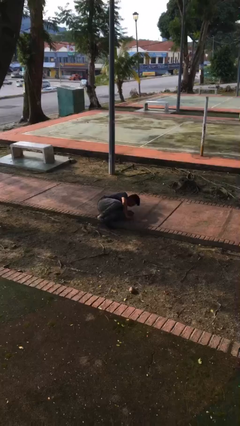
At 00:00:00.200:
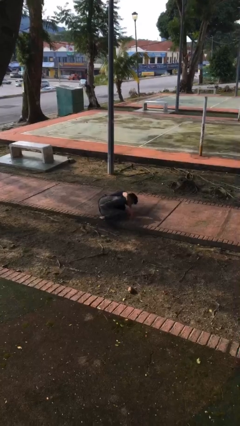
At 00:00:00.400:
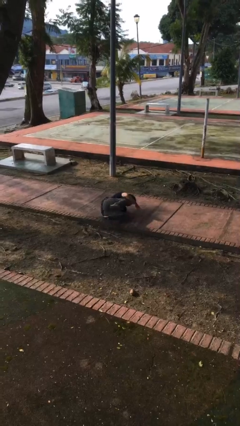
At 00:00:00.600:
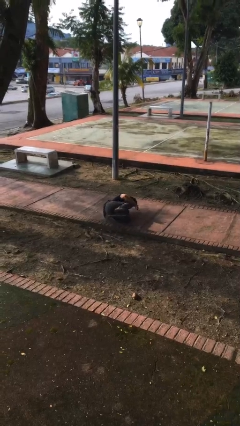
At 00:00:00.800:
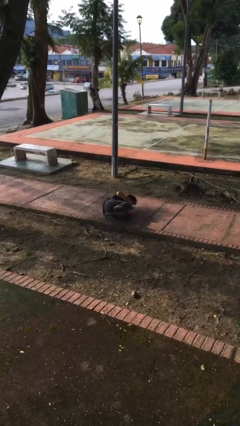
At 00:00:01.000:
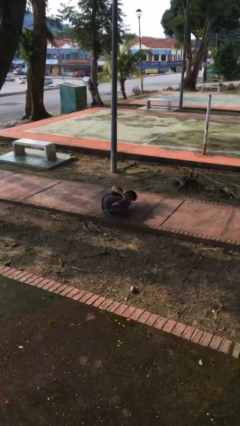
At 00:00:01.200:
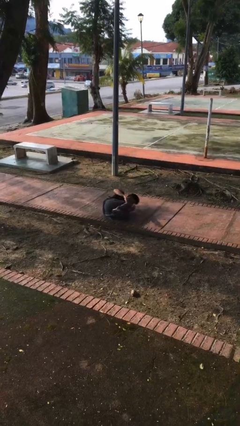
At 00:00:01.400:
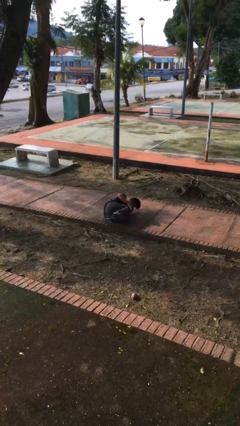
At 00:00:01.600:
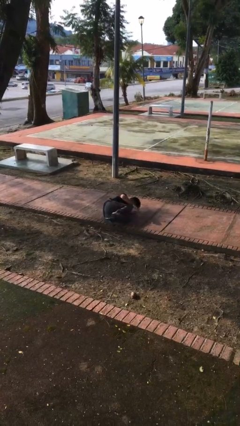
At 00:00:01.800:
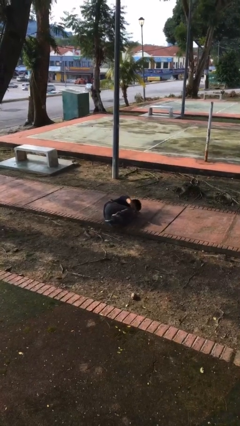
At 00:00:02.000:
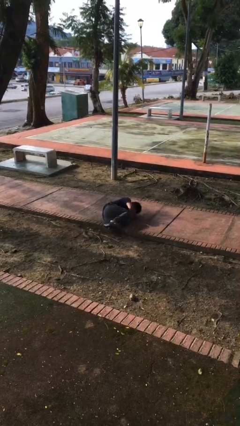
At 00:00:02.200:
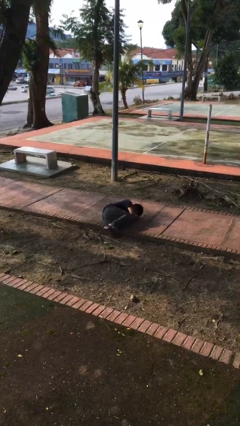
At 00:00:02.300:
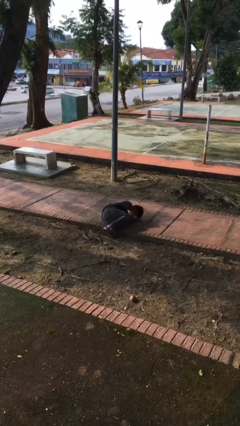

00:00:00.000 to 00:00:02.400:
person lies down on floor

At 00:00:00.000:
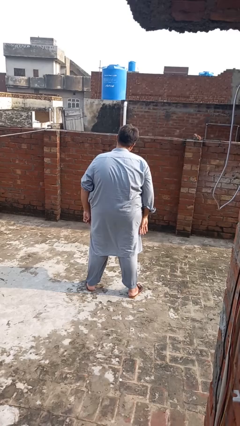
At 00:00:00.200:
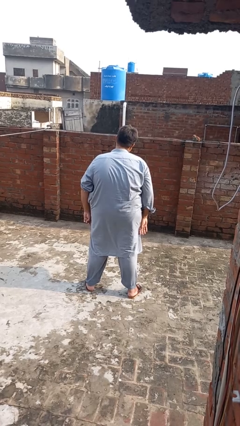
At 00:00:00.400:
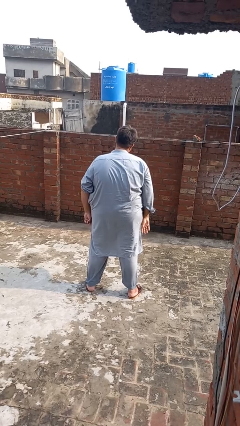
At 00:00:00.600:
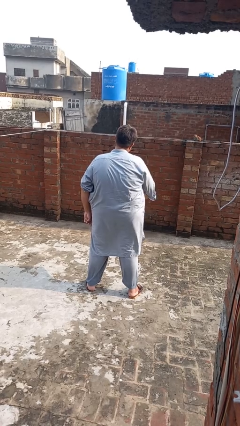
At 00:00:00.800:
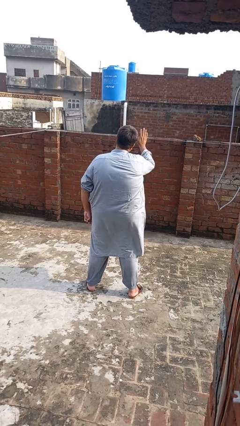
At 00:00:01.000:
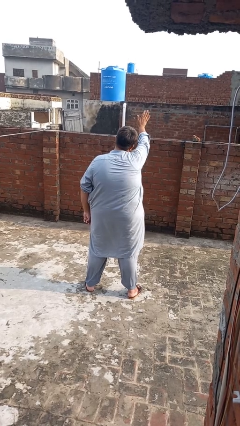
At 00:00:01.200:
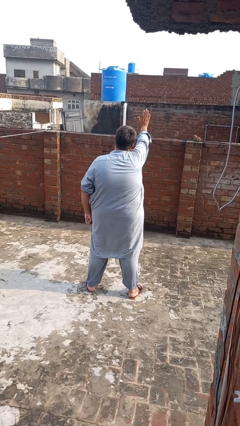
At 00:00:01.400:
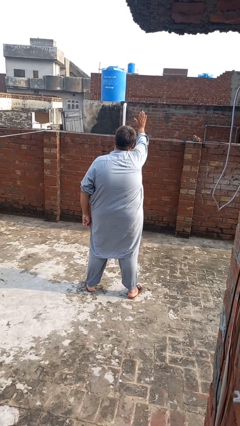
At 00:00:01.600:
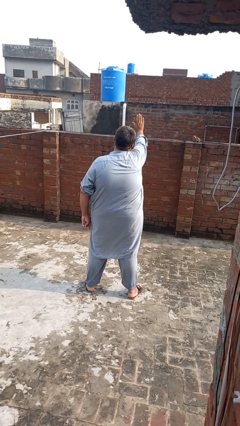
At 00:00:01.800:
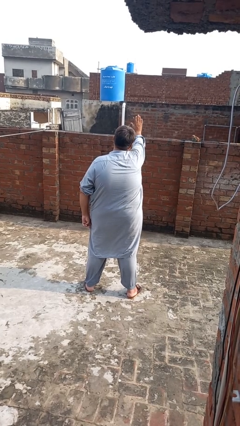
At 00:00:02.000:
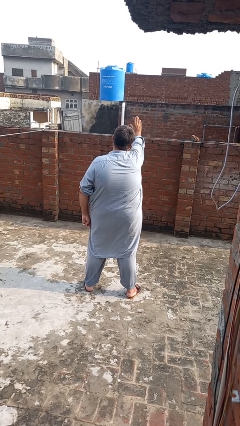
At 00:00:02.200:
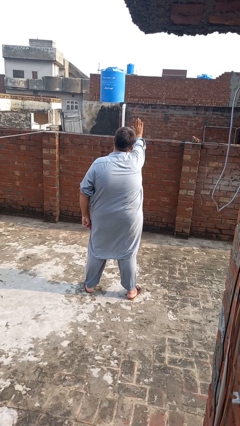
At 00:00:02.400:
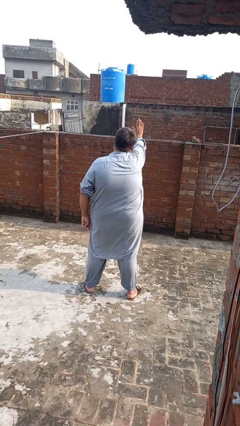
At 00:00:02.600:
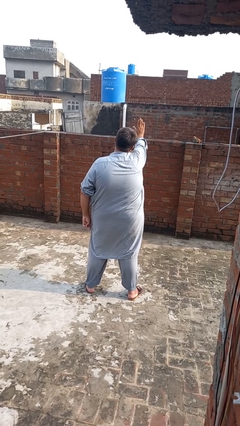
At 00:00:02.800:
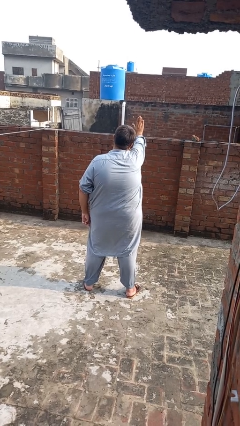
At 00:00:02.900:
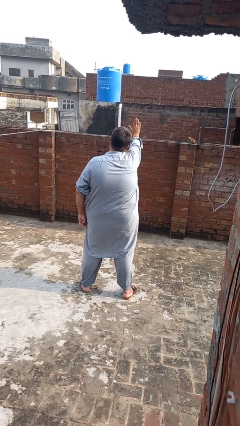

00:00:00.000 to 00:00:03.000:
person gestures stop

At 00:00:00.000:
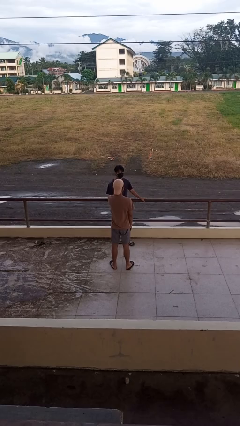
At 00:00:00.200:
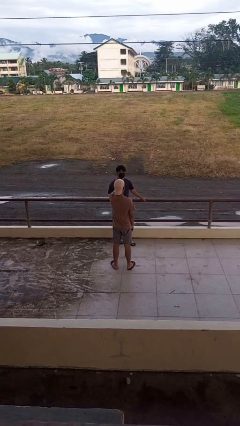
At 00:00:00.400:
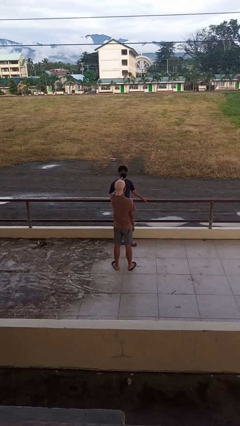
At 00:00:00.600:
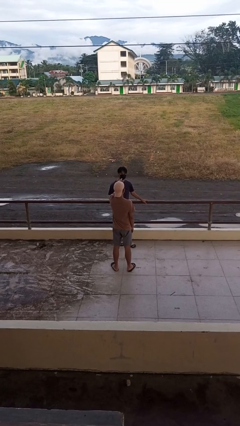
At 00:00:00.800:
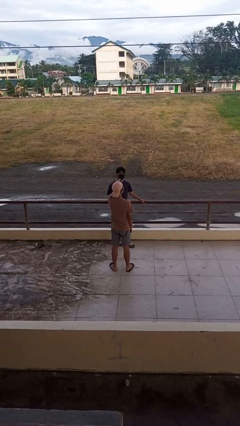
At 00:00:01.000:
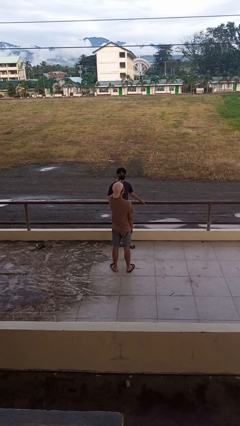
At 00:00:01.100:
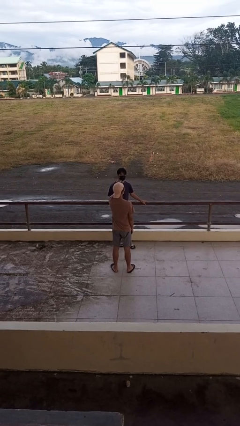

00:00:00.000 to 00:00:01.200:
person points at person

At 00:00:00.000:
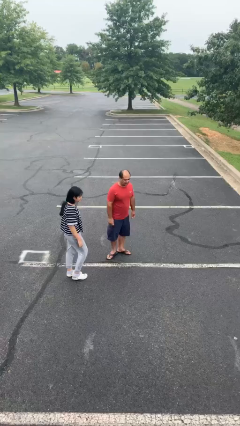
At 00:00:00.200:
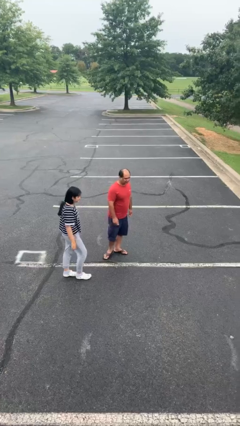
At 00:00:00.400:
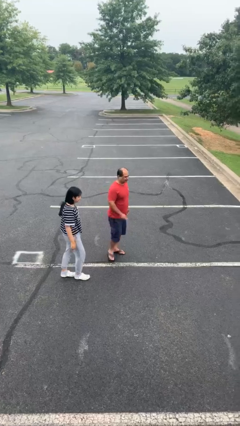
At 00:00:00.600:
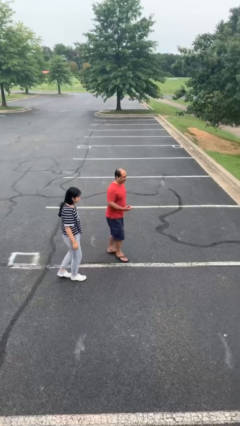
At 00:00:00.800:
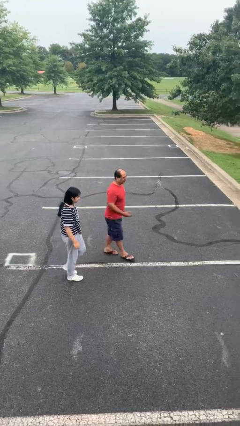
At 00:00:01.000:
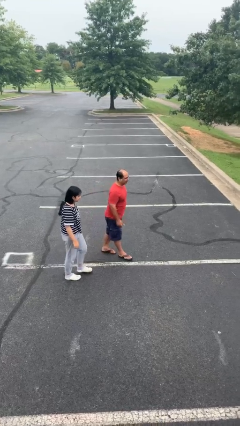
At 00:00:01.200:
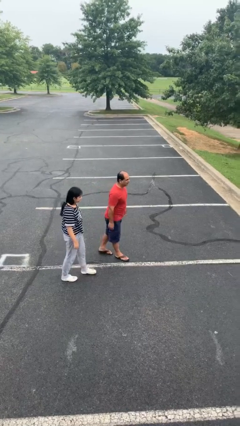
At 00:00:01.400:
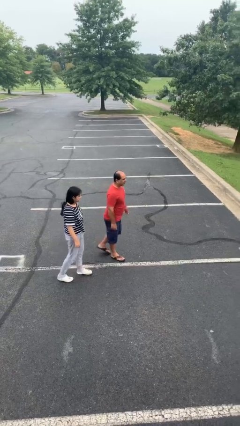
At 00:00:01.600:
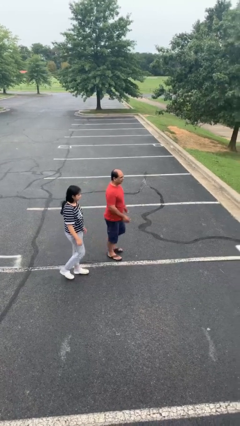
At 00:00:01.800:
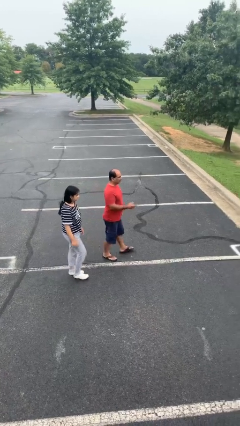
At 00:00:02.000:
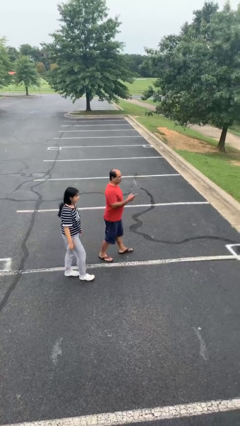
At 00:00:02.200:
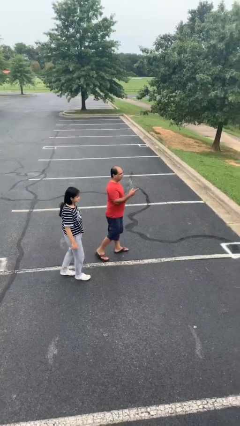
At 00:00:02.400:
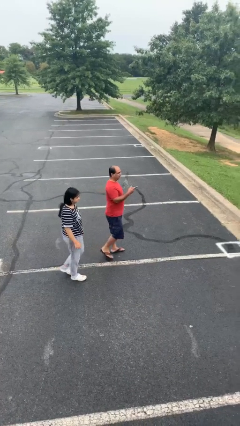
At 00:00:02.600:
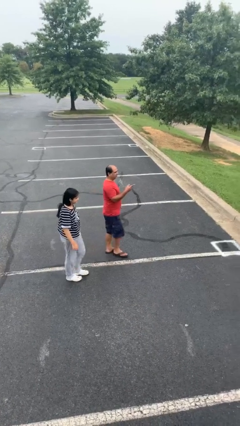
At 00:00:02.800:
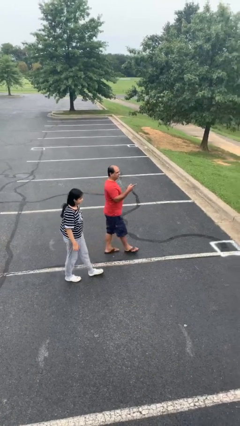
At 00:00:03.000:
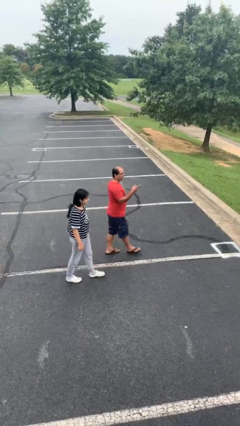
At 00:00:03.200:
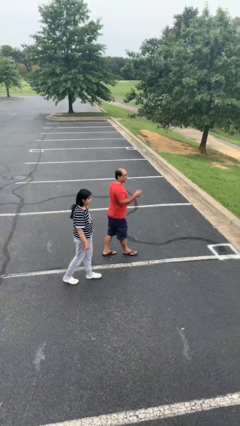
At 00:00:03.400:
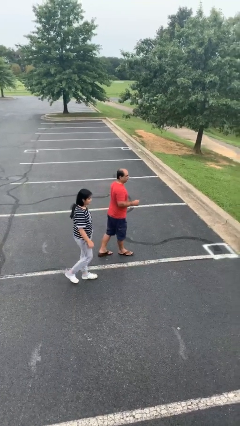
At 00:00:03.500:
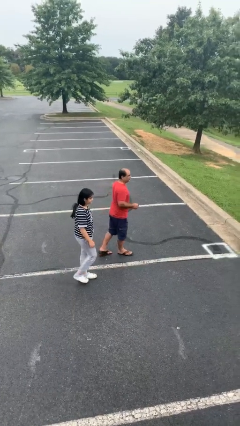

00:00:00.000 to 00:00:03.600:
person talks to person

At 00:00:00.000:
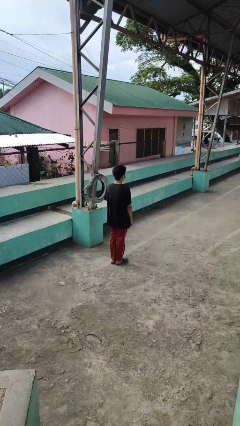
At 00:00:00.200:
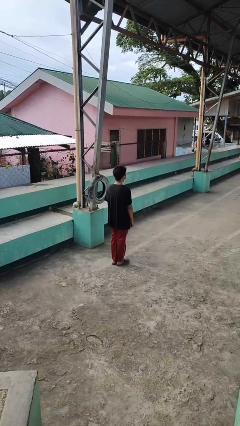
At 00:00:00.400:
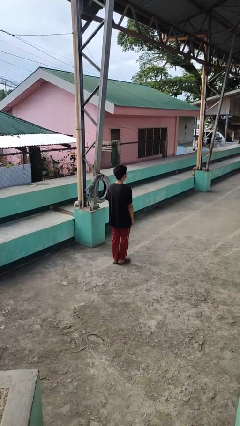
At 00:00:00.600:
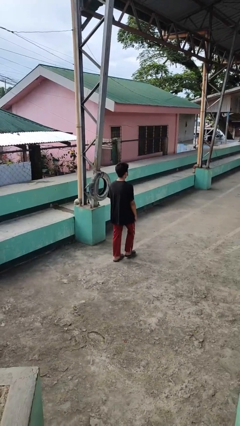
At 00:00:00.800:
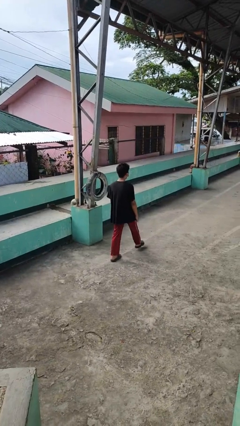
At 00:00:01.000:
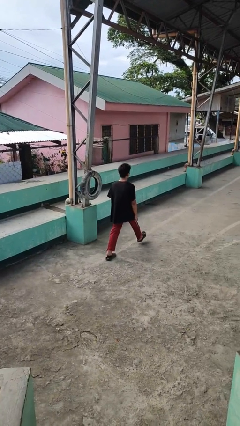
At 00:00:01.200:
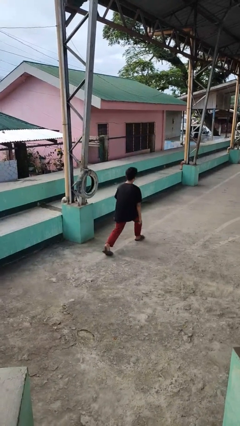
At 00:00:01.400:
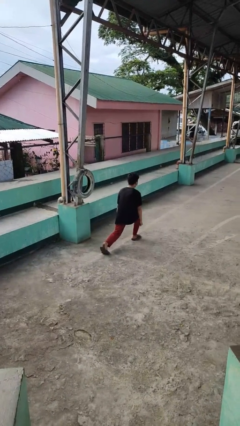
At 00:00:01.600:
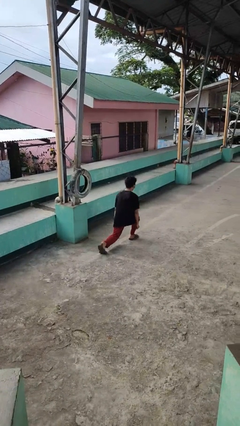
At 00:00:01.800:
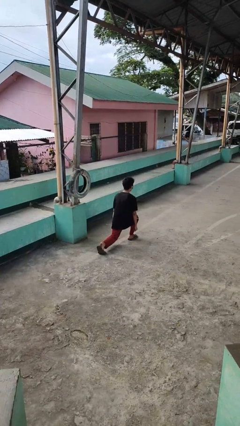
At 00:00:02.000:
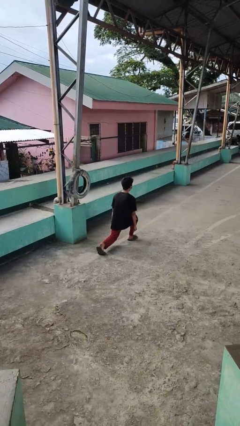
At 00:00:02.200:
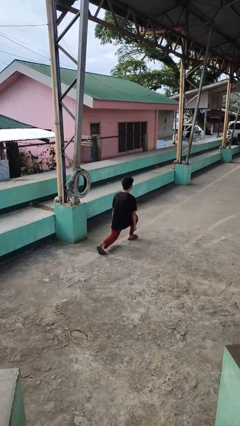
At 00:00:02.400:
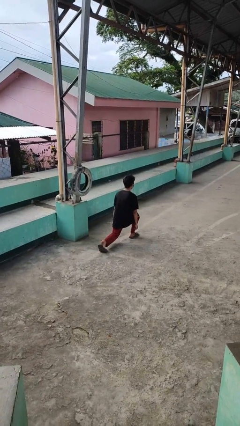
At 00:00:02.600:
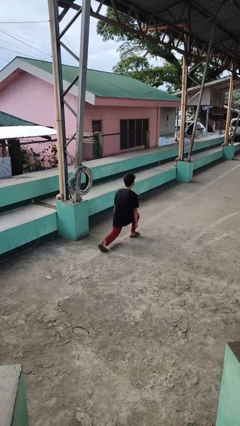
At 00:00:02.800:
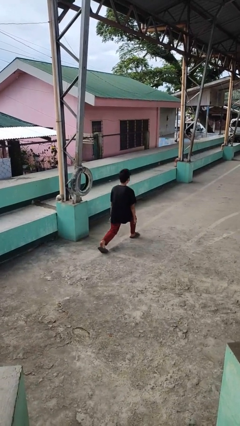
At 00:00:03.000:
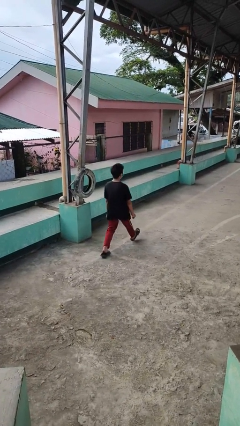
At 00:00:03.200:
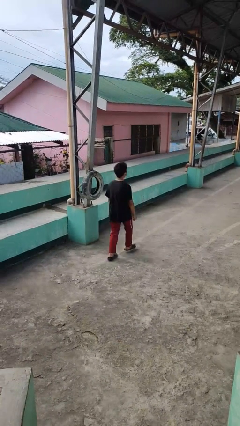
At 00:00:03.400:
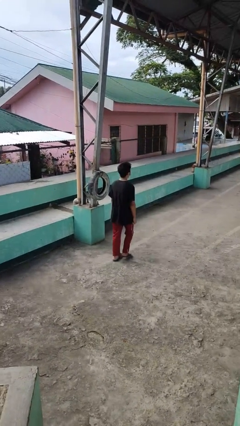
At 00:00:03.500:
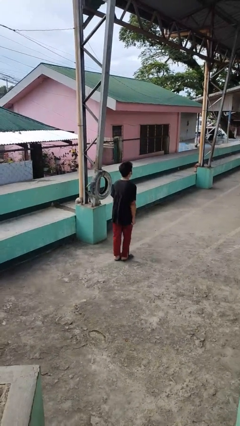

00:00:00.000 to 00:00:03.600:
person exercises with lunges

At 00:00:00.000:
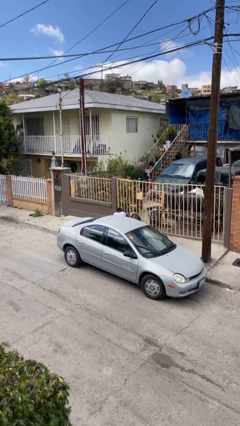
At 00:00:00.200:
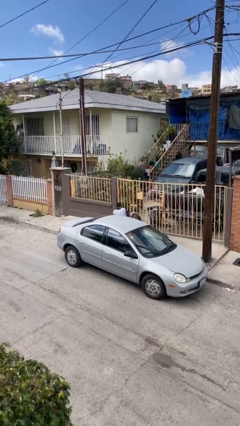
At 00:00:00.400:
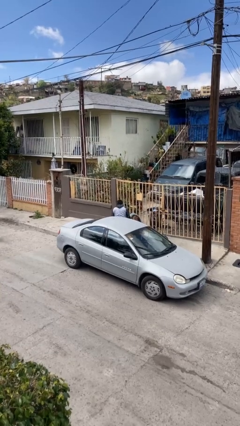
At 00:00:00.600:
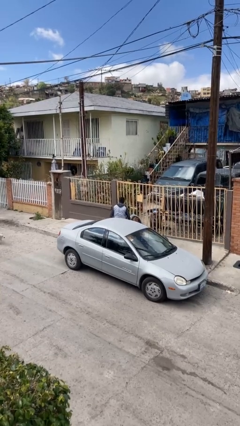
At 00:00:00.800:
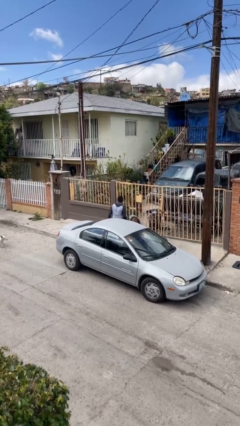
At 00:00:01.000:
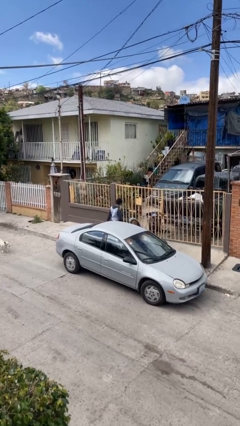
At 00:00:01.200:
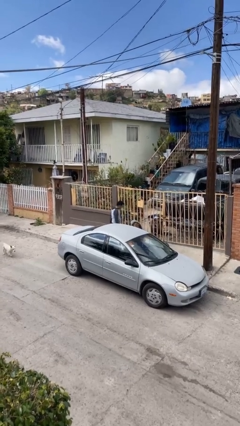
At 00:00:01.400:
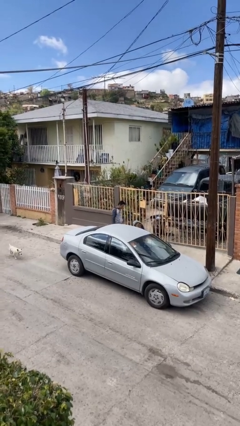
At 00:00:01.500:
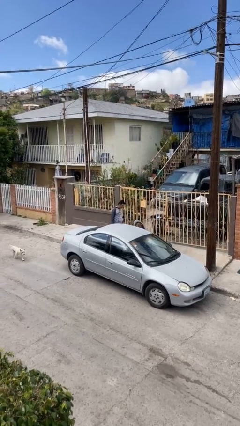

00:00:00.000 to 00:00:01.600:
person exits car

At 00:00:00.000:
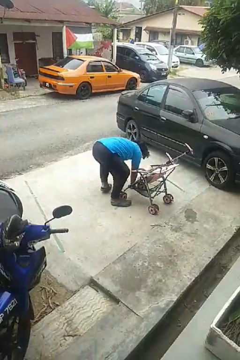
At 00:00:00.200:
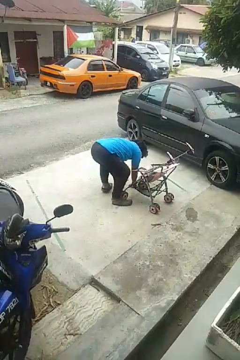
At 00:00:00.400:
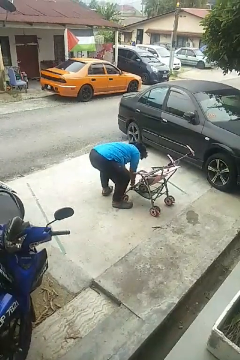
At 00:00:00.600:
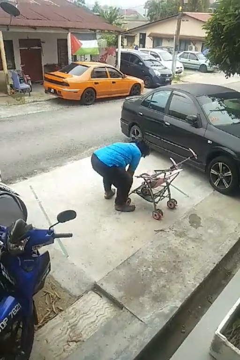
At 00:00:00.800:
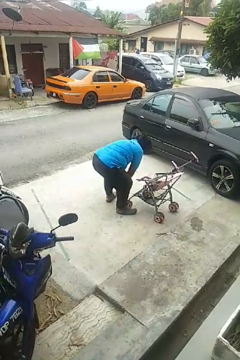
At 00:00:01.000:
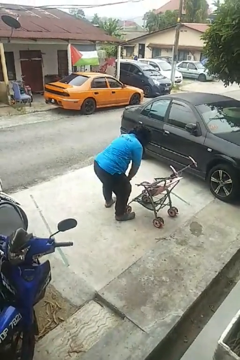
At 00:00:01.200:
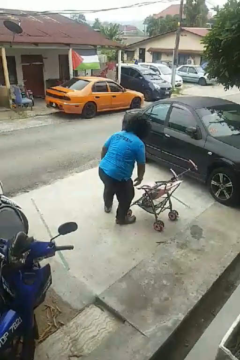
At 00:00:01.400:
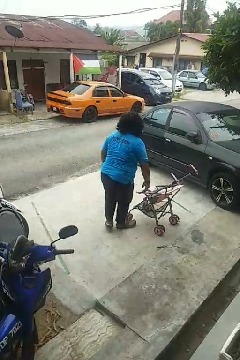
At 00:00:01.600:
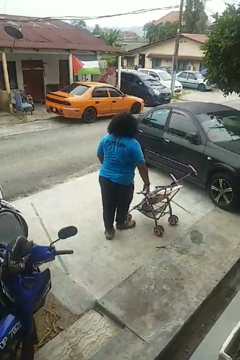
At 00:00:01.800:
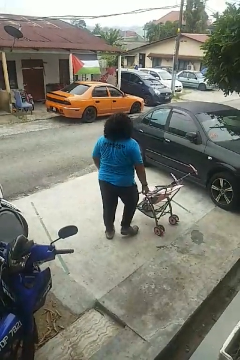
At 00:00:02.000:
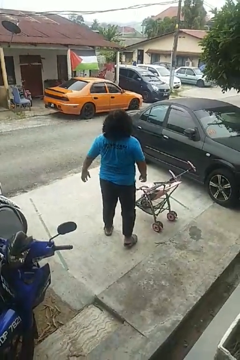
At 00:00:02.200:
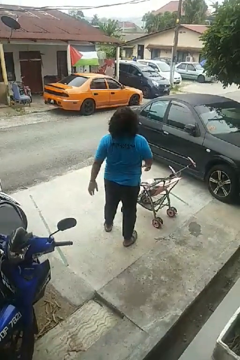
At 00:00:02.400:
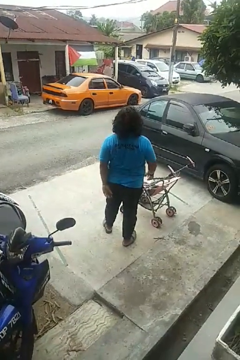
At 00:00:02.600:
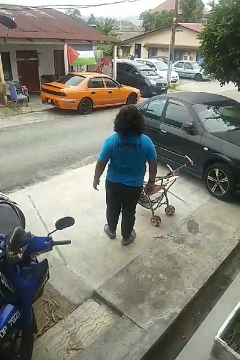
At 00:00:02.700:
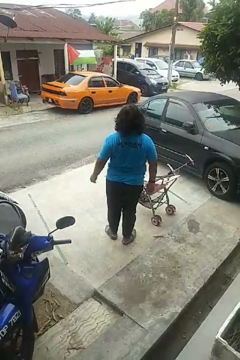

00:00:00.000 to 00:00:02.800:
person stands up from floor
